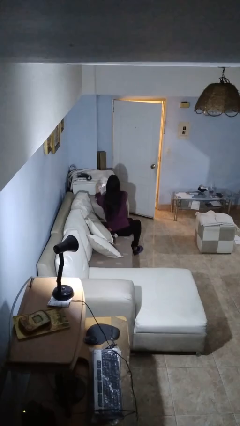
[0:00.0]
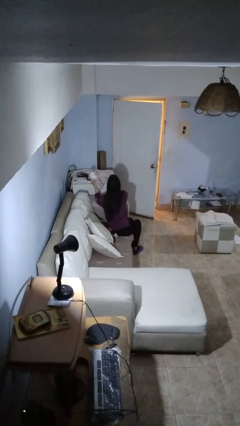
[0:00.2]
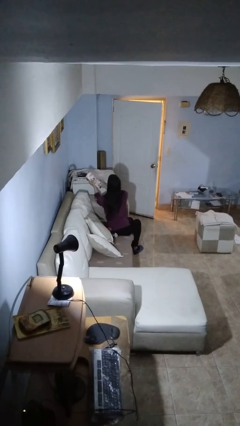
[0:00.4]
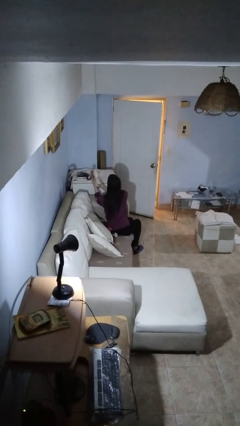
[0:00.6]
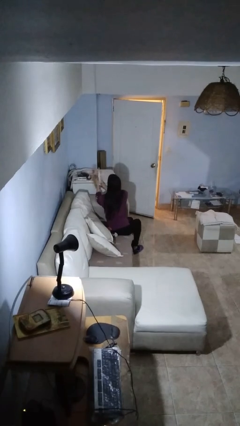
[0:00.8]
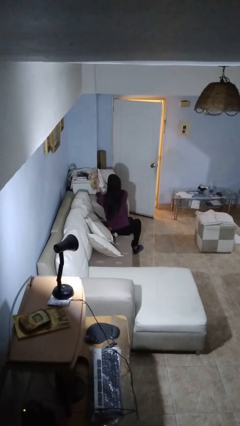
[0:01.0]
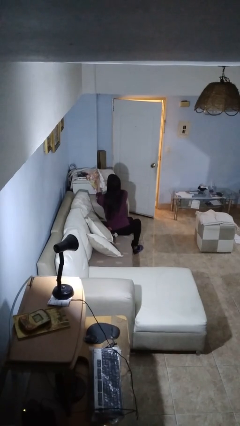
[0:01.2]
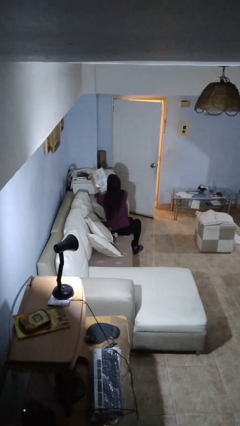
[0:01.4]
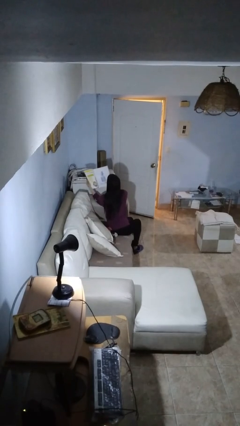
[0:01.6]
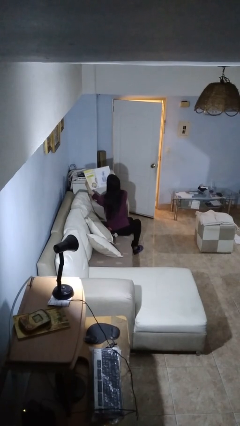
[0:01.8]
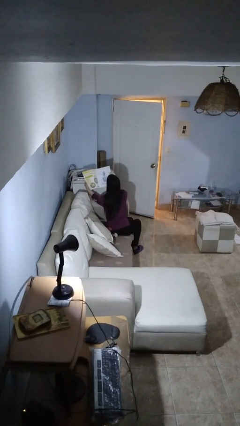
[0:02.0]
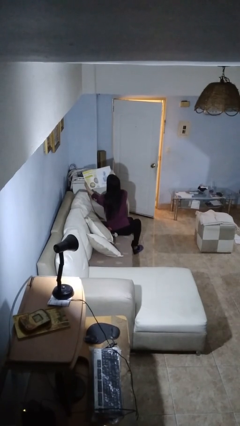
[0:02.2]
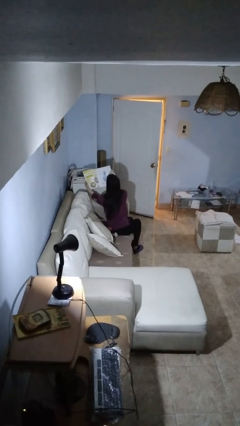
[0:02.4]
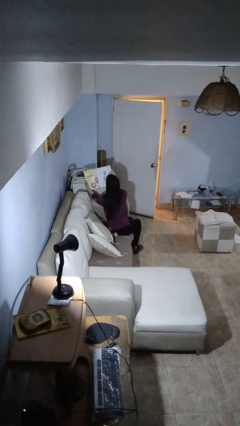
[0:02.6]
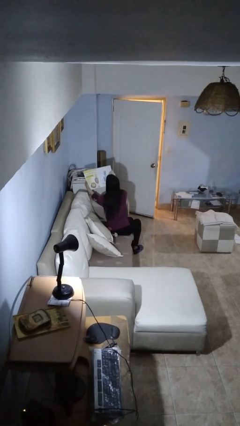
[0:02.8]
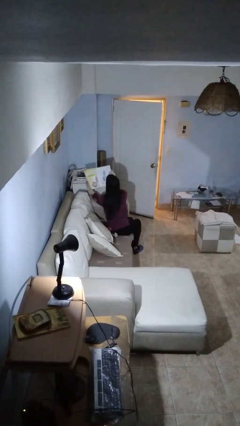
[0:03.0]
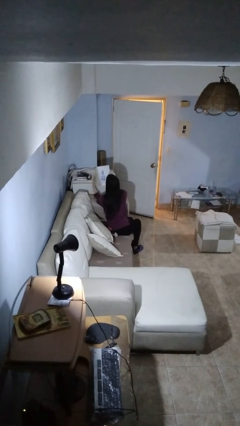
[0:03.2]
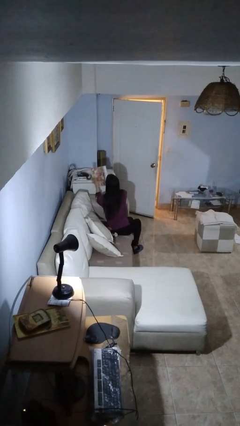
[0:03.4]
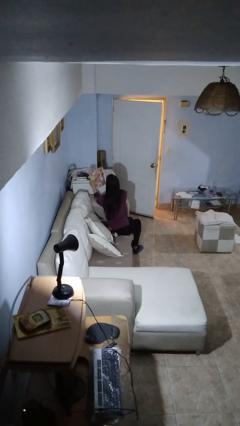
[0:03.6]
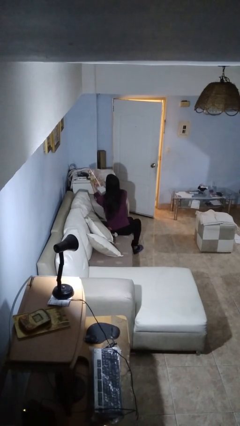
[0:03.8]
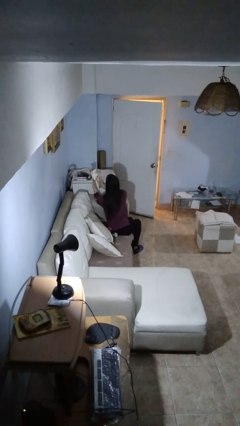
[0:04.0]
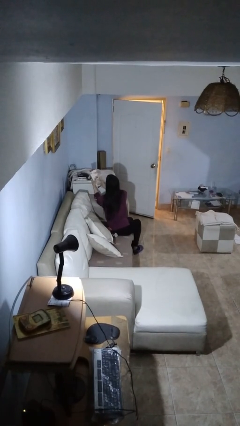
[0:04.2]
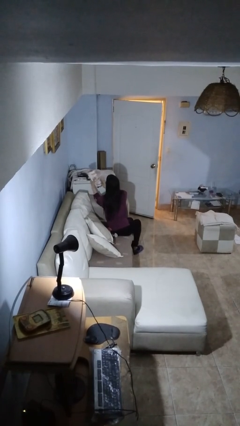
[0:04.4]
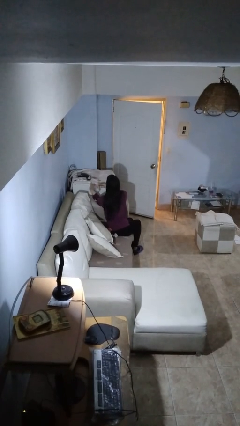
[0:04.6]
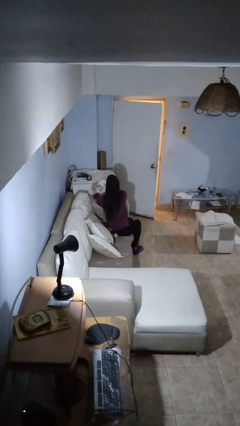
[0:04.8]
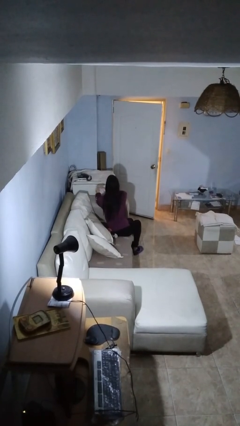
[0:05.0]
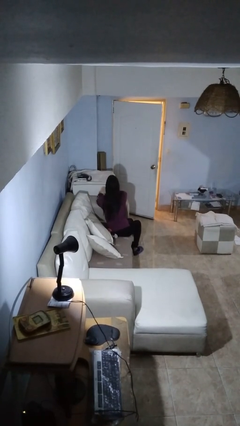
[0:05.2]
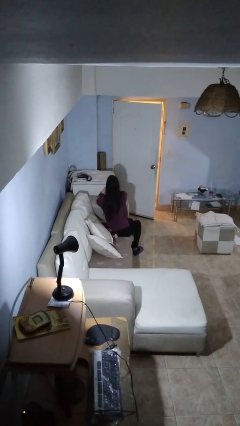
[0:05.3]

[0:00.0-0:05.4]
person reads magazine

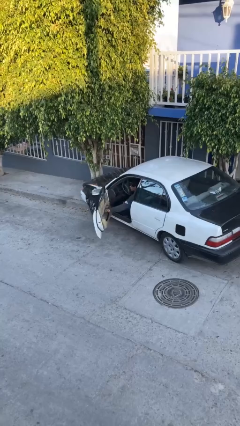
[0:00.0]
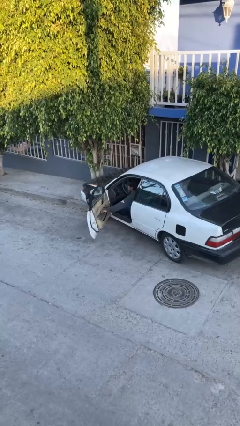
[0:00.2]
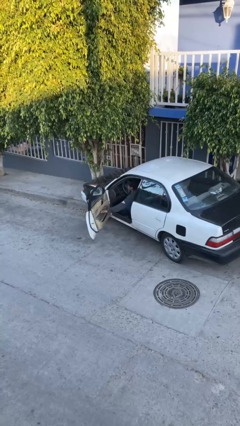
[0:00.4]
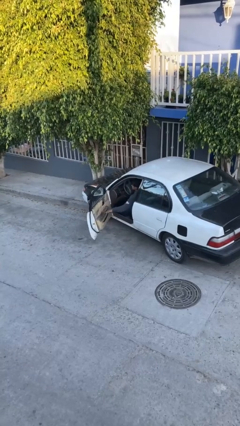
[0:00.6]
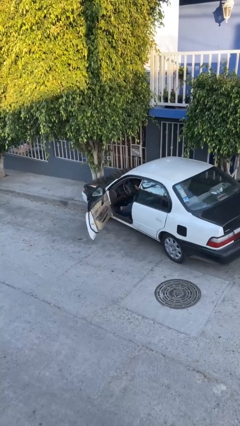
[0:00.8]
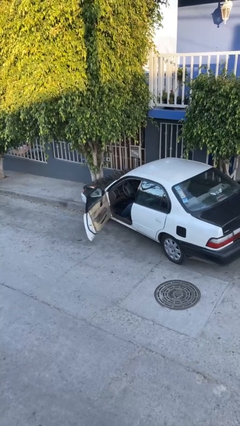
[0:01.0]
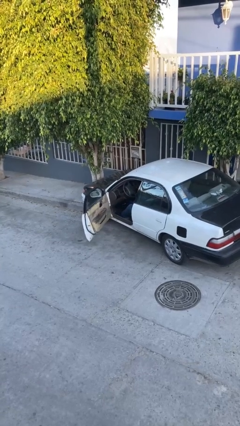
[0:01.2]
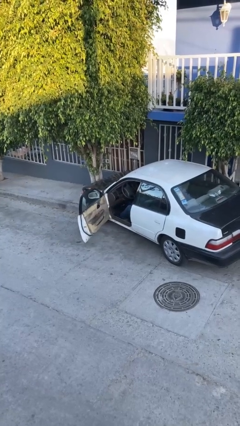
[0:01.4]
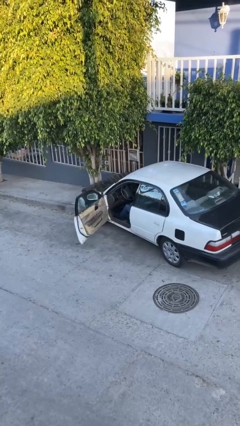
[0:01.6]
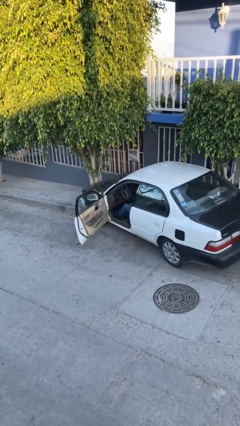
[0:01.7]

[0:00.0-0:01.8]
person opens car door

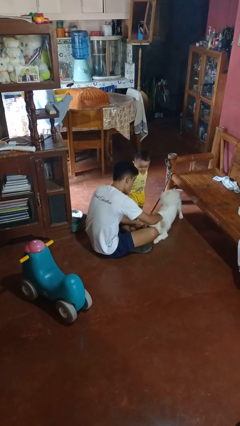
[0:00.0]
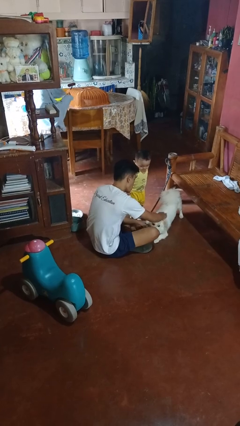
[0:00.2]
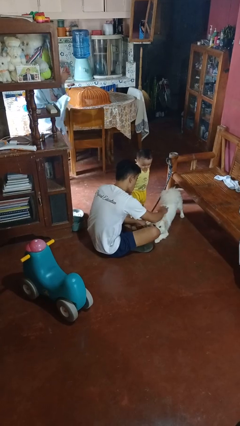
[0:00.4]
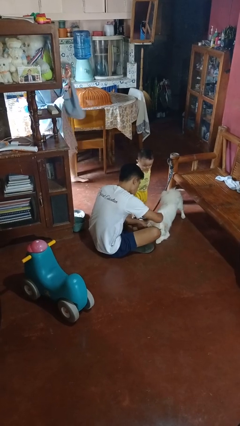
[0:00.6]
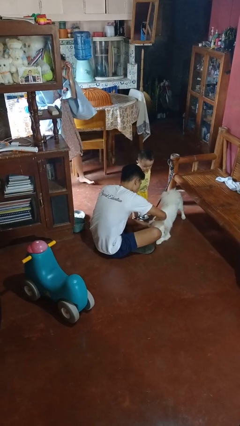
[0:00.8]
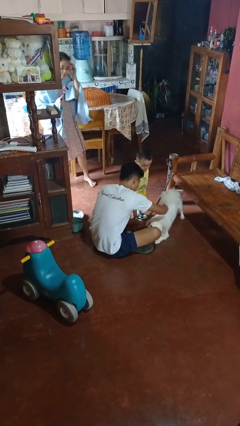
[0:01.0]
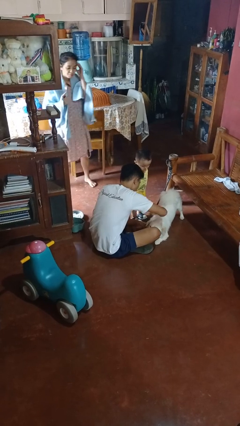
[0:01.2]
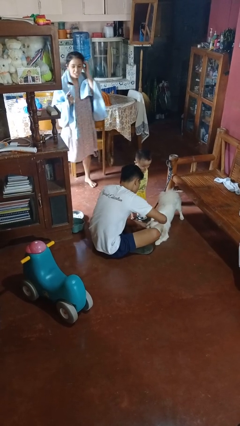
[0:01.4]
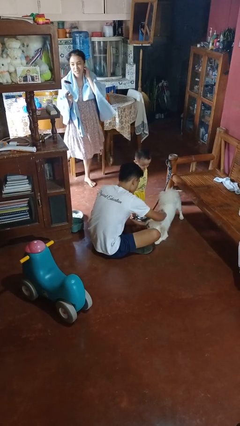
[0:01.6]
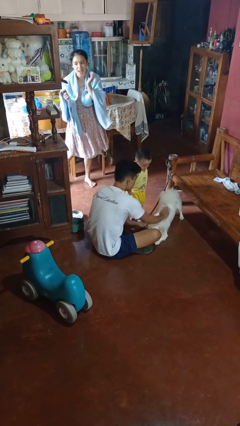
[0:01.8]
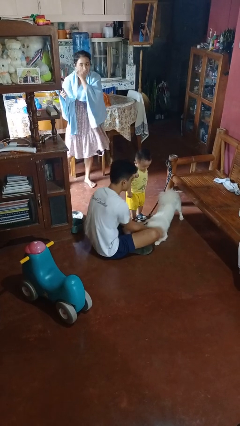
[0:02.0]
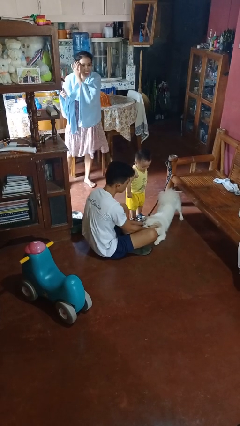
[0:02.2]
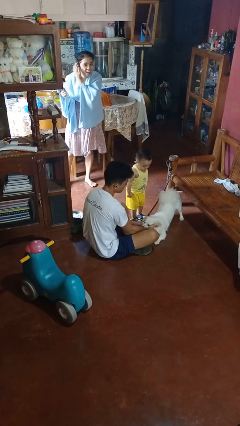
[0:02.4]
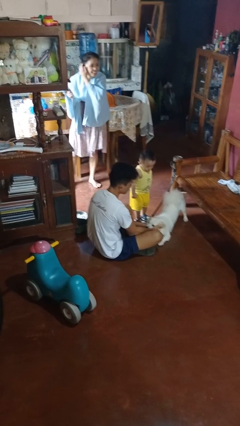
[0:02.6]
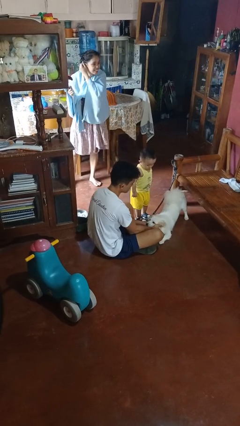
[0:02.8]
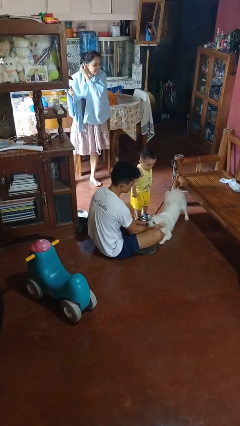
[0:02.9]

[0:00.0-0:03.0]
person pets dog

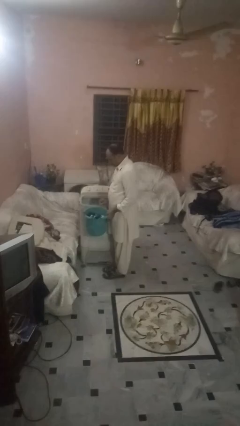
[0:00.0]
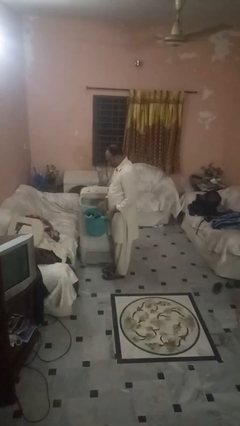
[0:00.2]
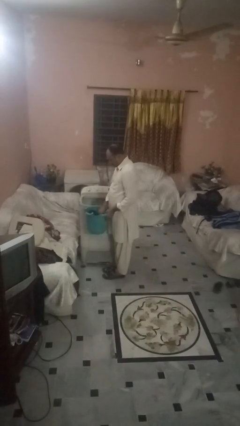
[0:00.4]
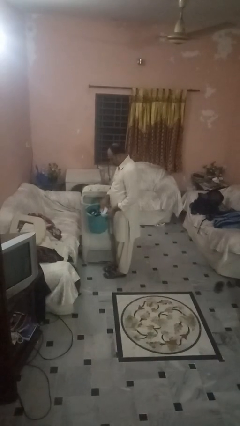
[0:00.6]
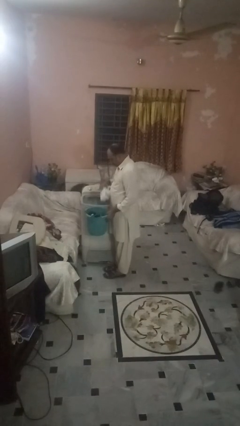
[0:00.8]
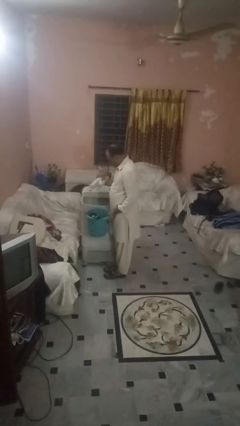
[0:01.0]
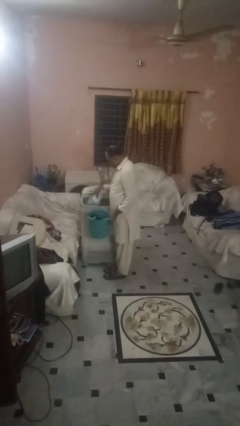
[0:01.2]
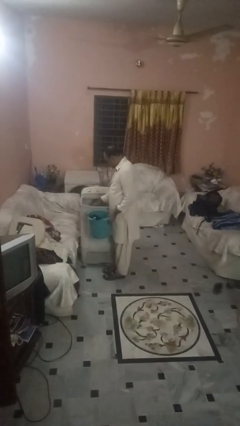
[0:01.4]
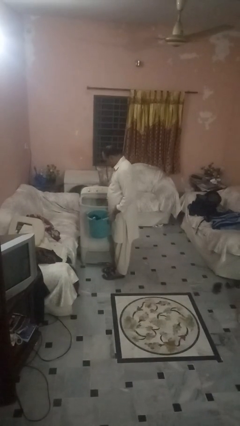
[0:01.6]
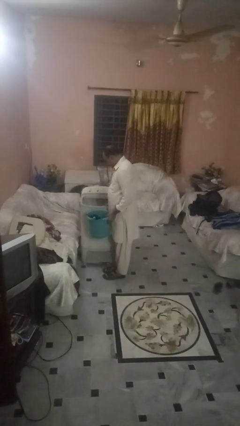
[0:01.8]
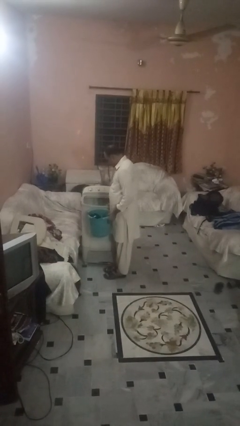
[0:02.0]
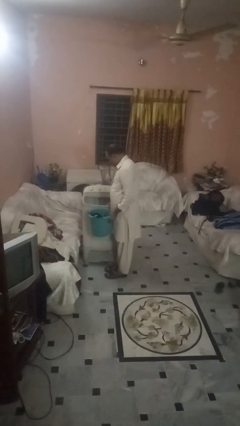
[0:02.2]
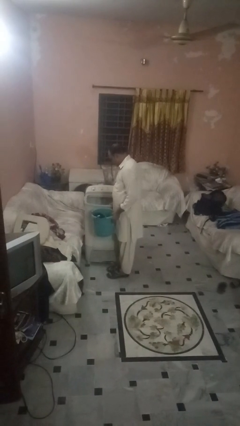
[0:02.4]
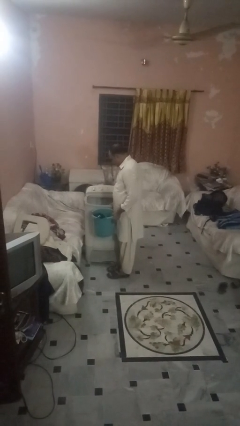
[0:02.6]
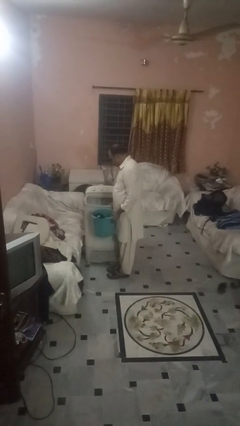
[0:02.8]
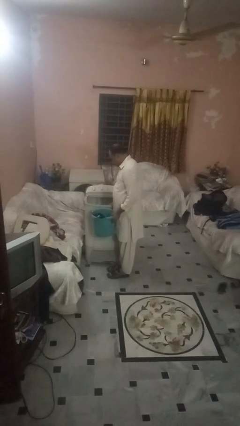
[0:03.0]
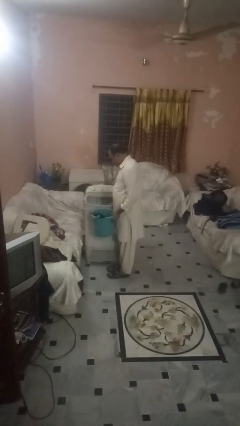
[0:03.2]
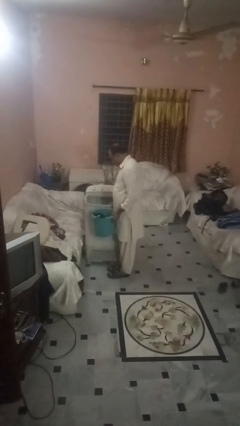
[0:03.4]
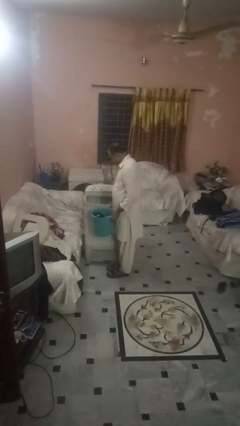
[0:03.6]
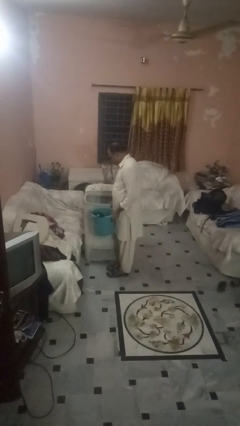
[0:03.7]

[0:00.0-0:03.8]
person loads clotheswasher

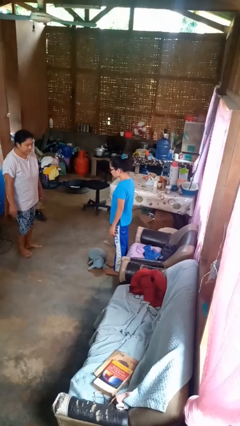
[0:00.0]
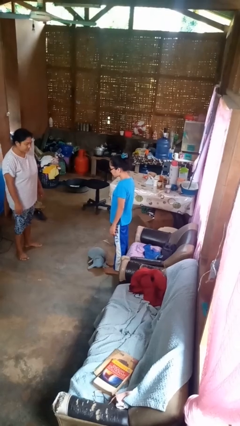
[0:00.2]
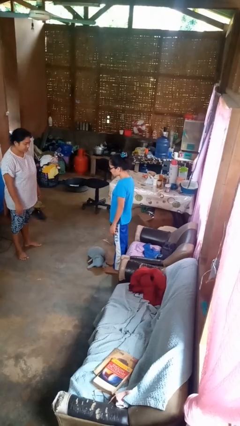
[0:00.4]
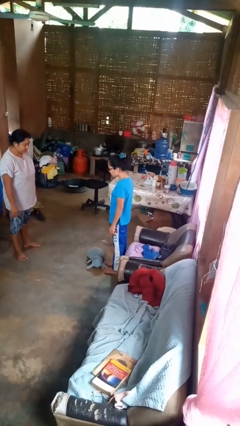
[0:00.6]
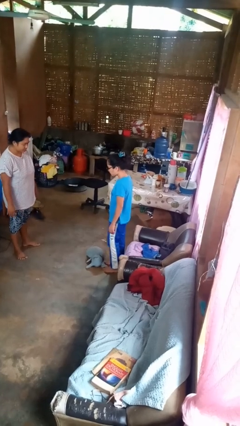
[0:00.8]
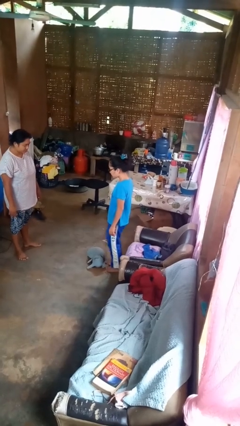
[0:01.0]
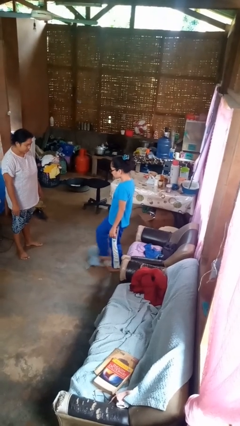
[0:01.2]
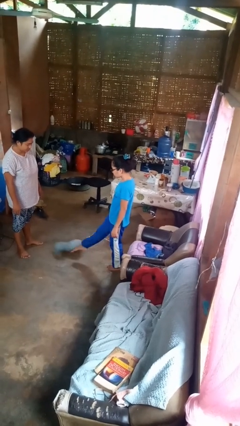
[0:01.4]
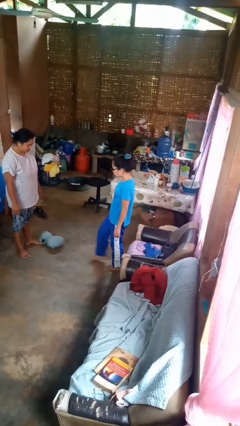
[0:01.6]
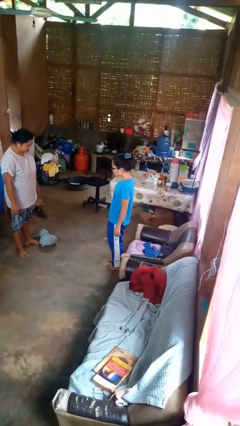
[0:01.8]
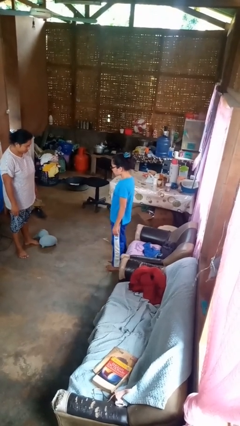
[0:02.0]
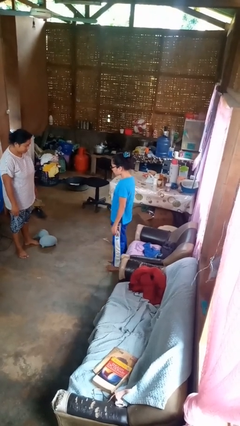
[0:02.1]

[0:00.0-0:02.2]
person kicks object to person

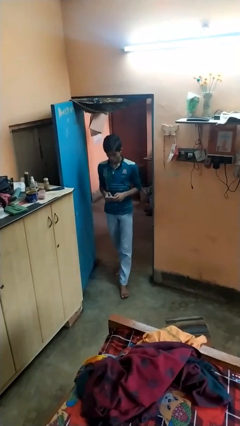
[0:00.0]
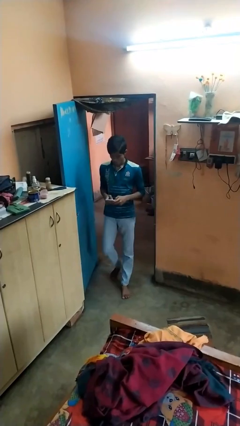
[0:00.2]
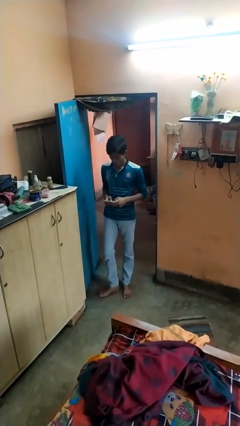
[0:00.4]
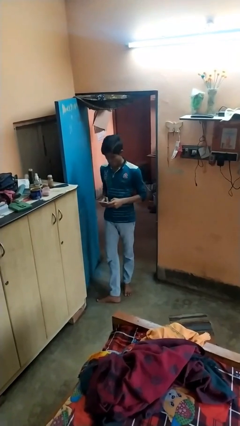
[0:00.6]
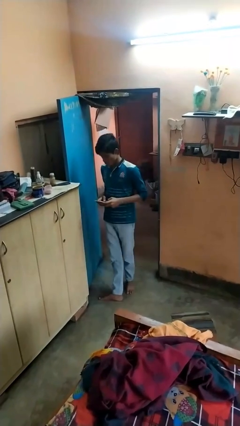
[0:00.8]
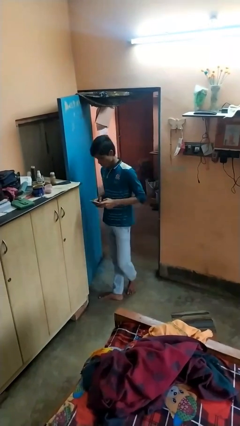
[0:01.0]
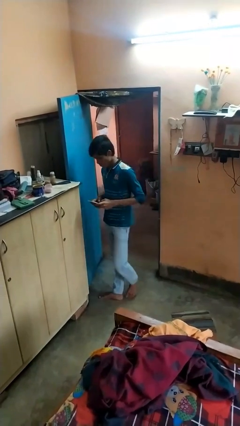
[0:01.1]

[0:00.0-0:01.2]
person enters scene through structure

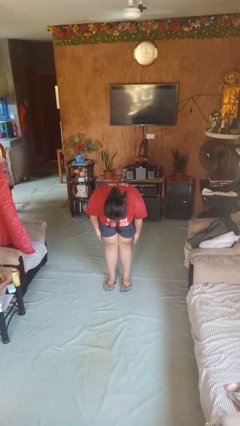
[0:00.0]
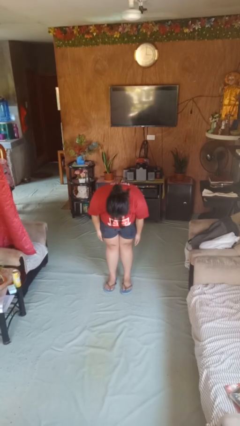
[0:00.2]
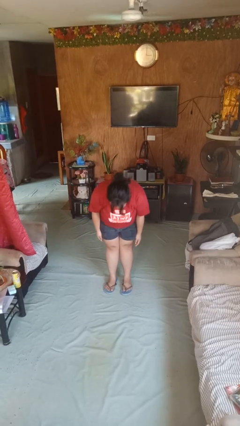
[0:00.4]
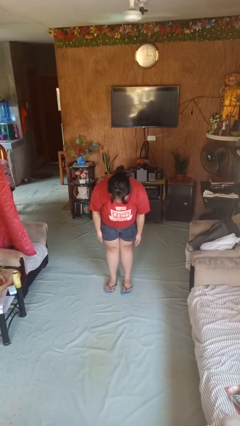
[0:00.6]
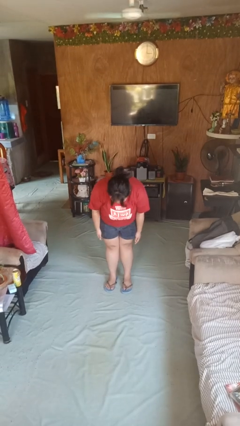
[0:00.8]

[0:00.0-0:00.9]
person bows
